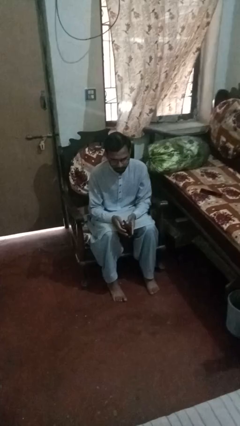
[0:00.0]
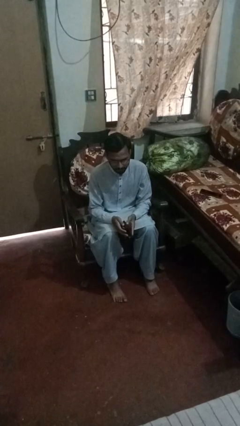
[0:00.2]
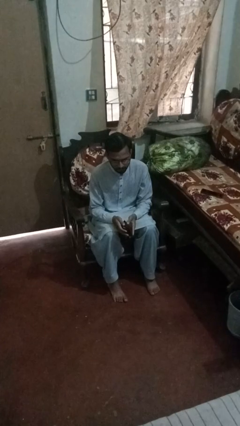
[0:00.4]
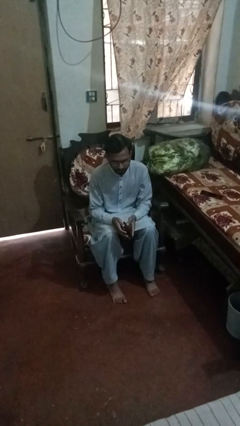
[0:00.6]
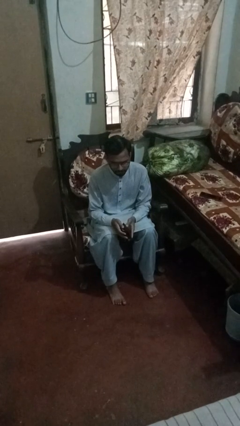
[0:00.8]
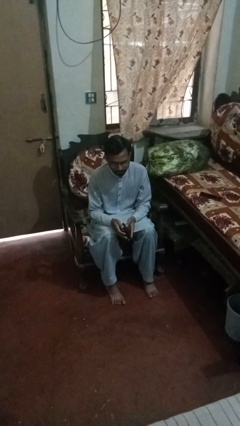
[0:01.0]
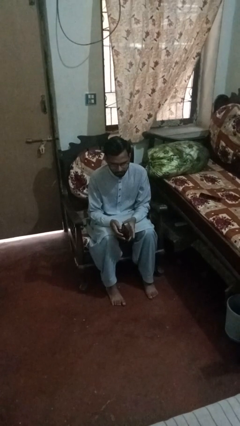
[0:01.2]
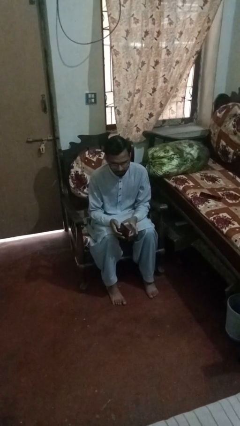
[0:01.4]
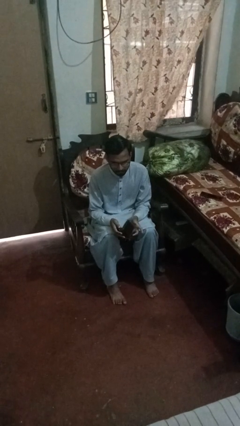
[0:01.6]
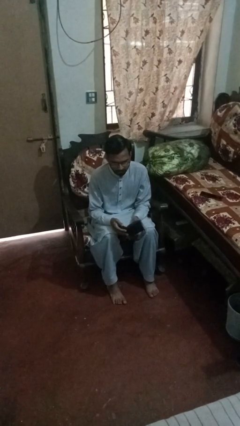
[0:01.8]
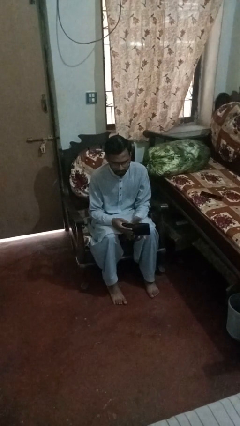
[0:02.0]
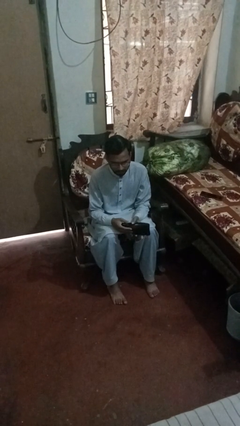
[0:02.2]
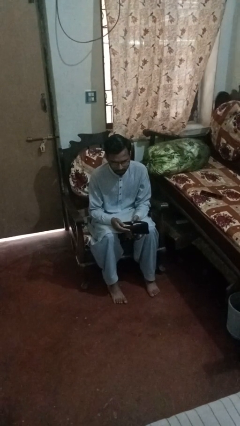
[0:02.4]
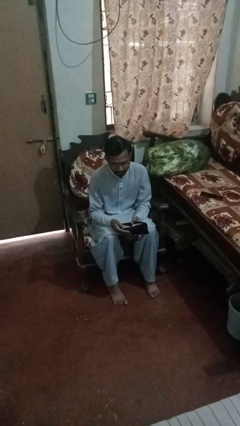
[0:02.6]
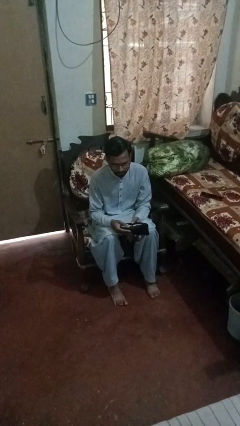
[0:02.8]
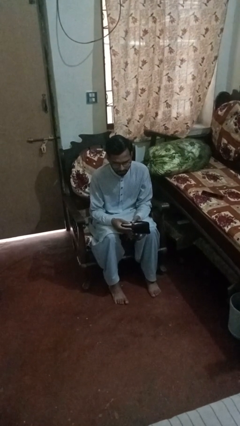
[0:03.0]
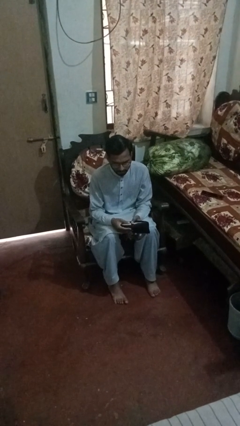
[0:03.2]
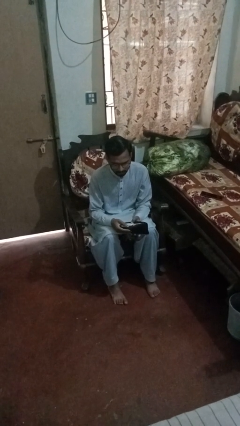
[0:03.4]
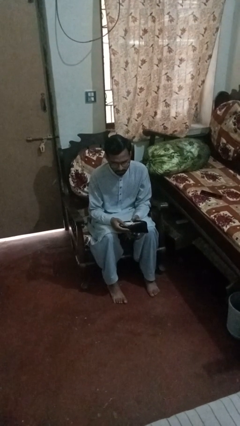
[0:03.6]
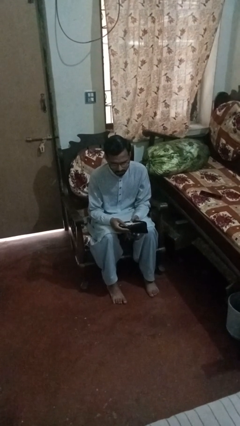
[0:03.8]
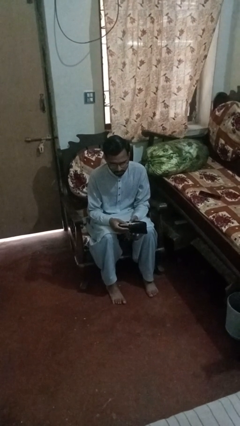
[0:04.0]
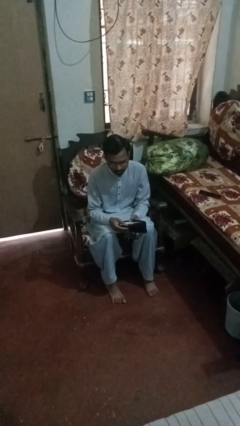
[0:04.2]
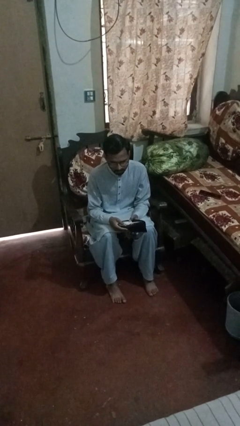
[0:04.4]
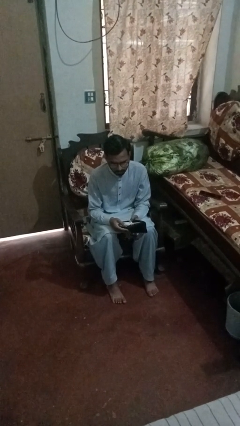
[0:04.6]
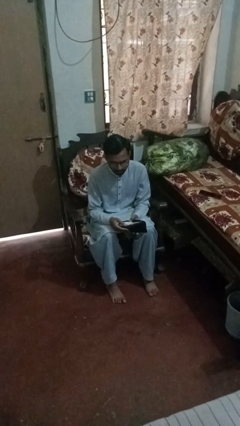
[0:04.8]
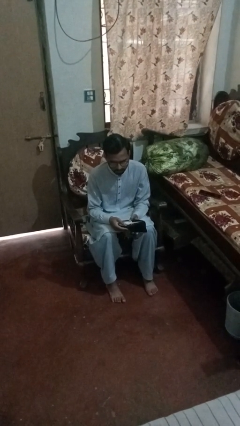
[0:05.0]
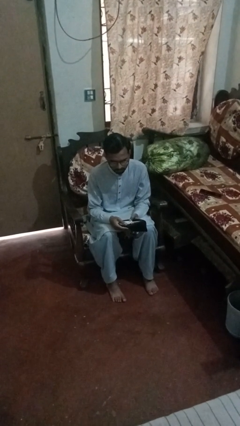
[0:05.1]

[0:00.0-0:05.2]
person searches in purse

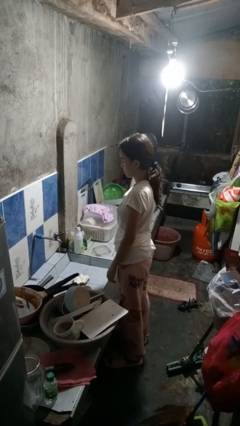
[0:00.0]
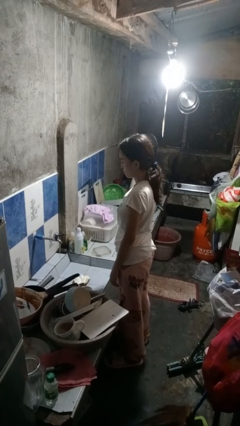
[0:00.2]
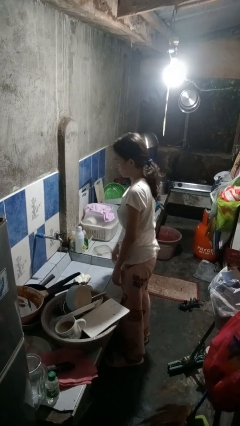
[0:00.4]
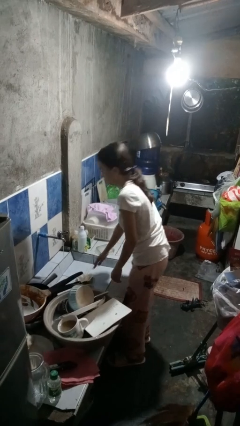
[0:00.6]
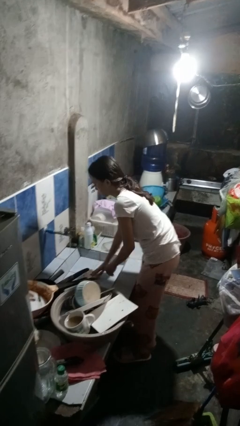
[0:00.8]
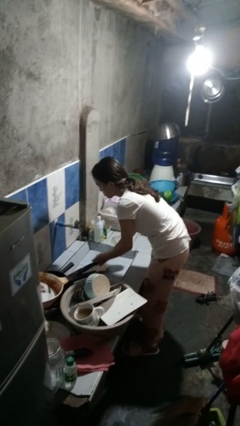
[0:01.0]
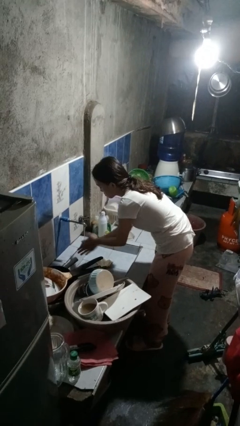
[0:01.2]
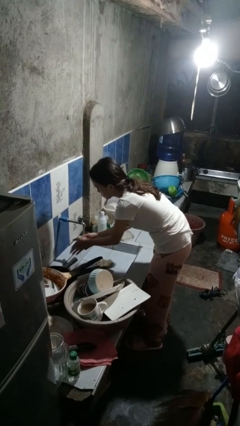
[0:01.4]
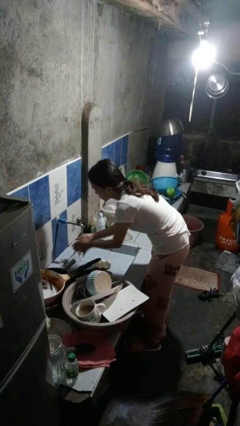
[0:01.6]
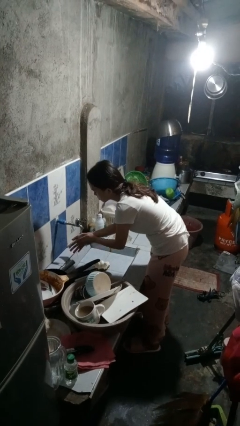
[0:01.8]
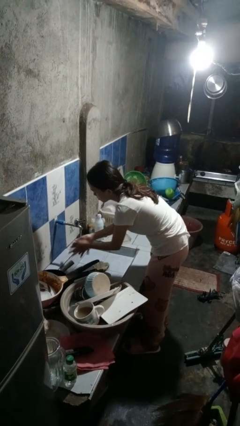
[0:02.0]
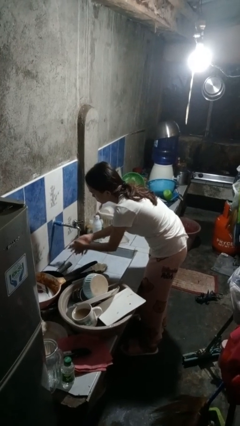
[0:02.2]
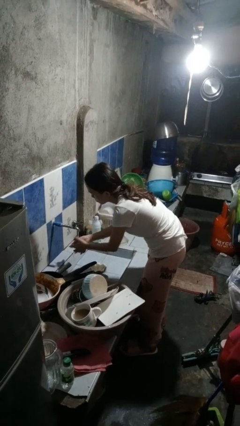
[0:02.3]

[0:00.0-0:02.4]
person washes hands

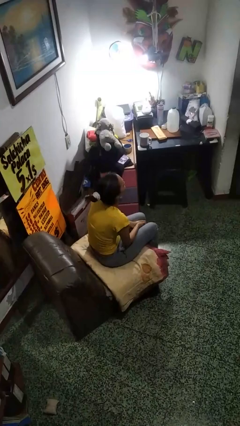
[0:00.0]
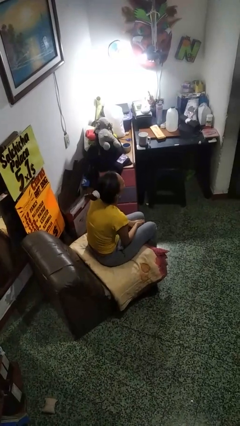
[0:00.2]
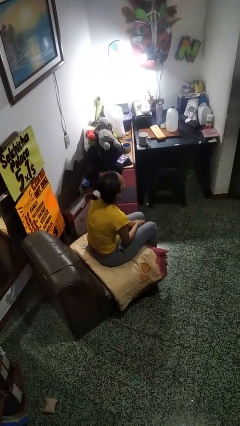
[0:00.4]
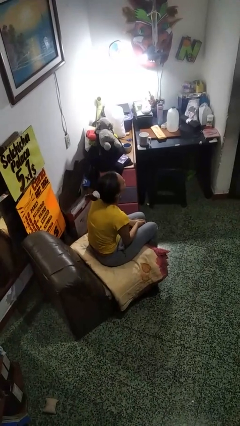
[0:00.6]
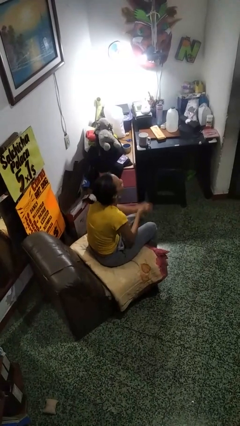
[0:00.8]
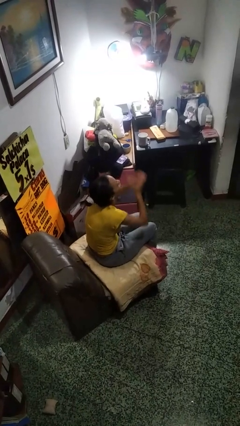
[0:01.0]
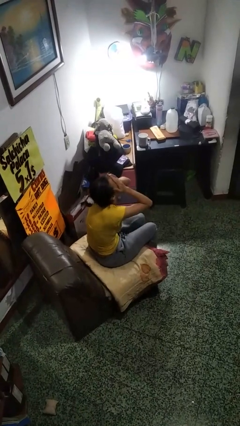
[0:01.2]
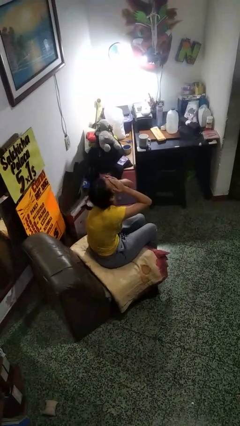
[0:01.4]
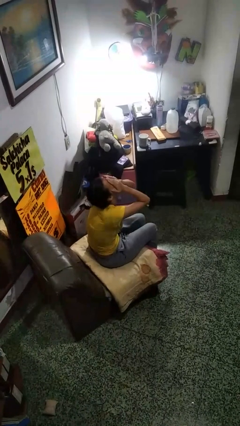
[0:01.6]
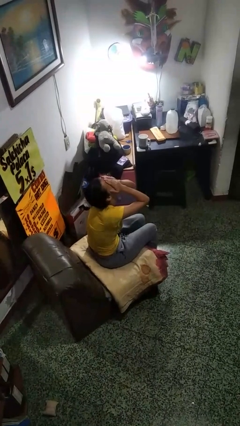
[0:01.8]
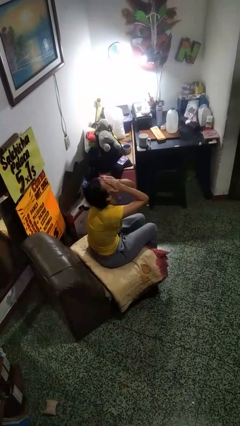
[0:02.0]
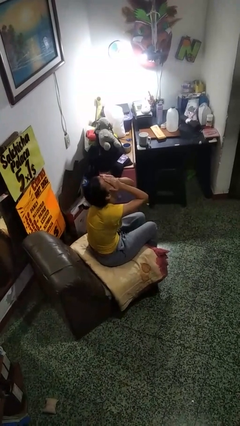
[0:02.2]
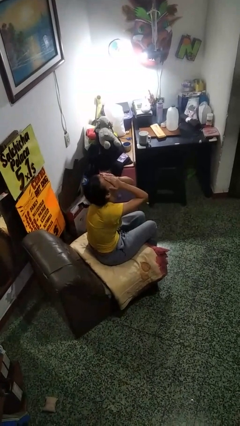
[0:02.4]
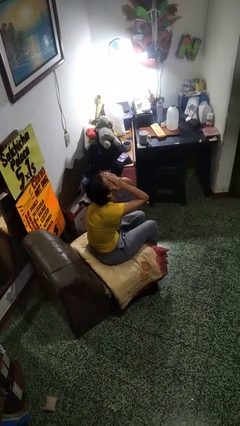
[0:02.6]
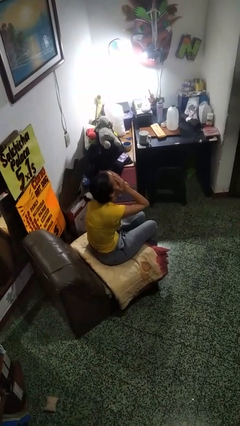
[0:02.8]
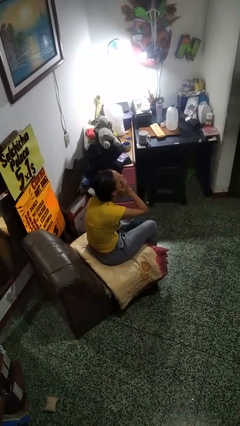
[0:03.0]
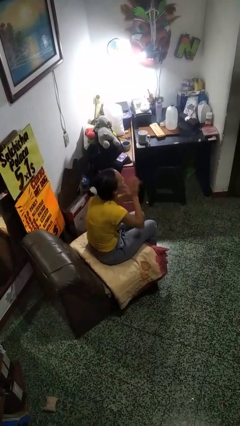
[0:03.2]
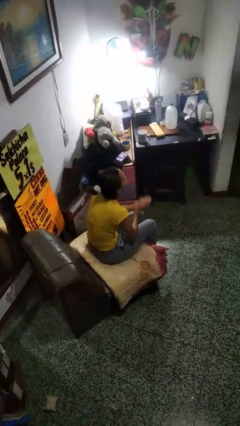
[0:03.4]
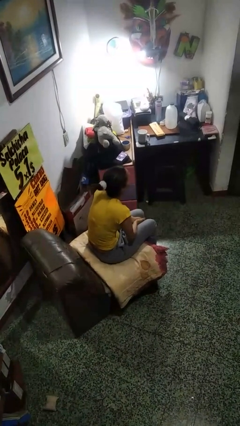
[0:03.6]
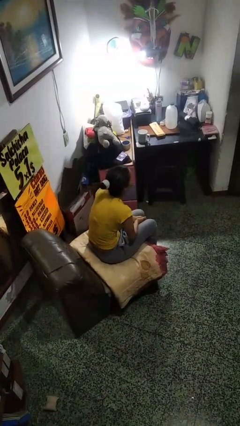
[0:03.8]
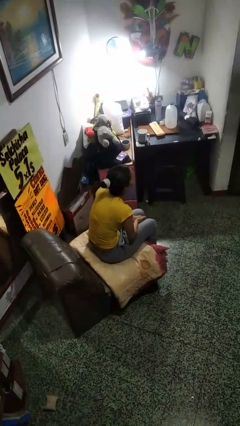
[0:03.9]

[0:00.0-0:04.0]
person covers face with hands

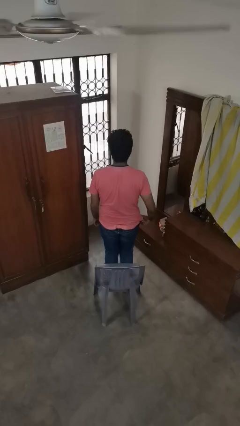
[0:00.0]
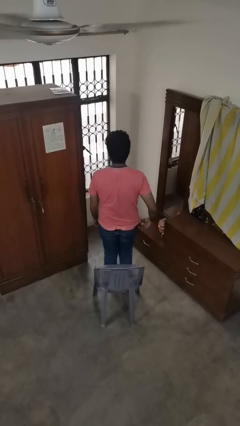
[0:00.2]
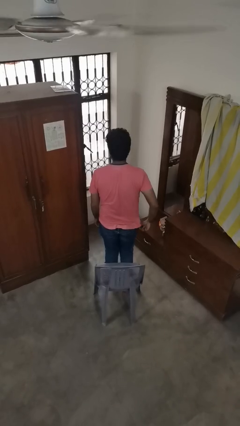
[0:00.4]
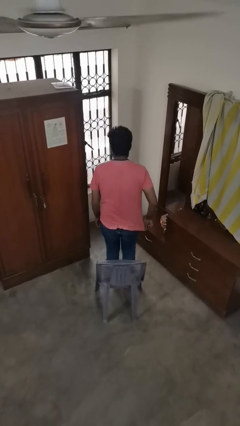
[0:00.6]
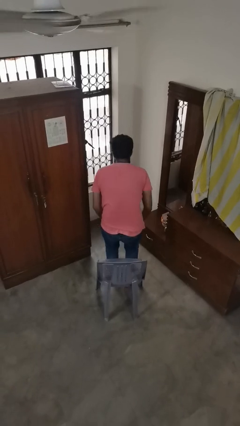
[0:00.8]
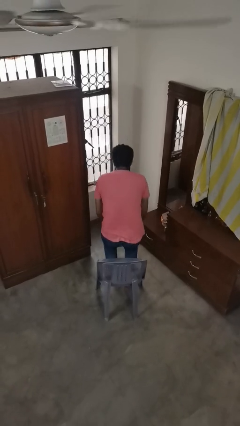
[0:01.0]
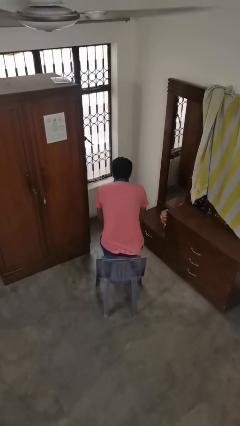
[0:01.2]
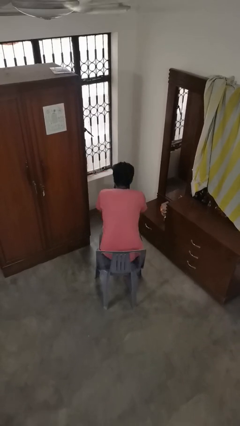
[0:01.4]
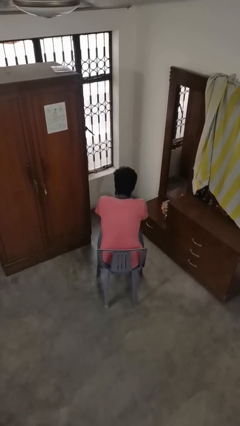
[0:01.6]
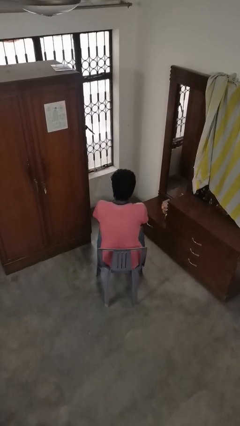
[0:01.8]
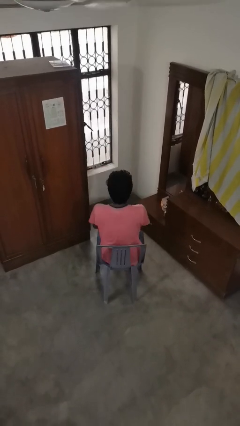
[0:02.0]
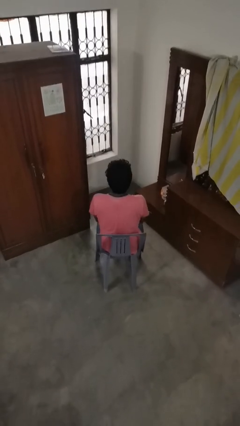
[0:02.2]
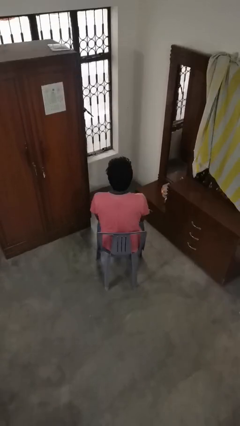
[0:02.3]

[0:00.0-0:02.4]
person sits down

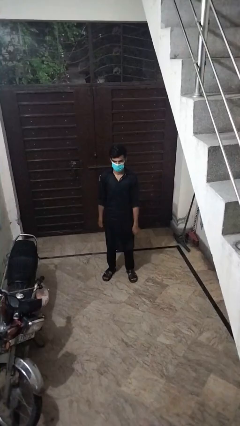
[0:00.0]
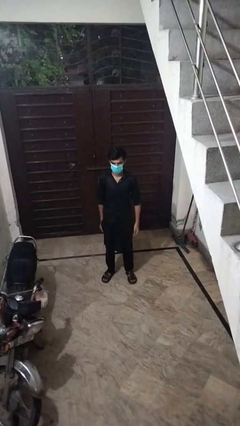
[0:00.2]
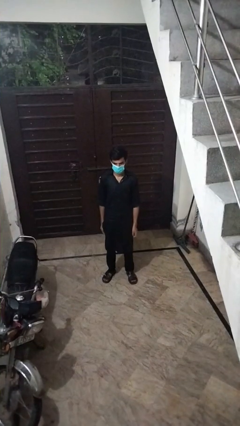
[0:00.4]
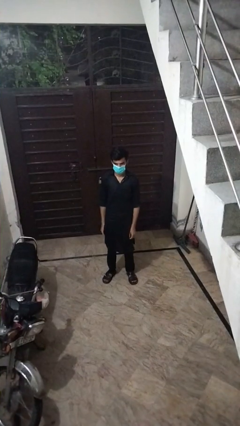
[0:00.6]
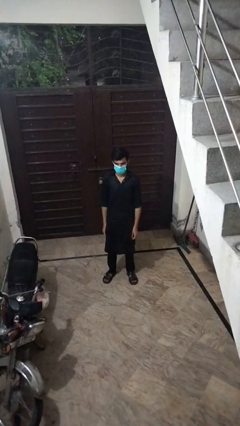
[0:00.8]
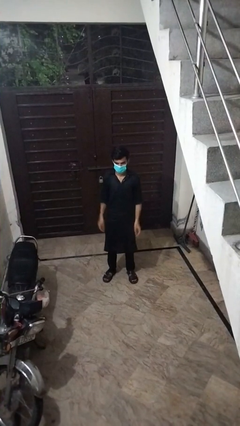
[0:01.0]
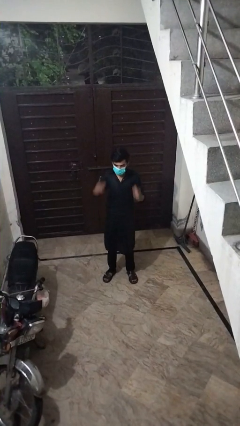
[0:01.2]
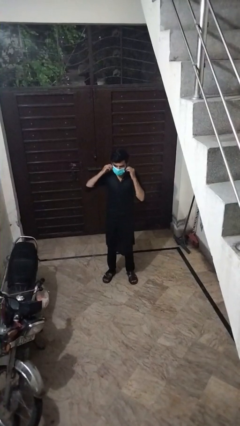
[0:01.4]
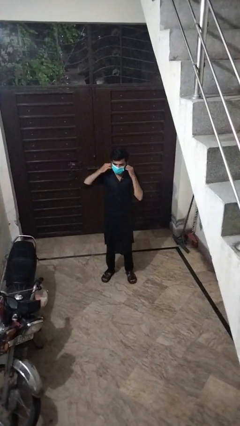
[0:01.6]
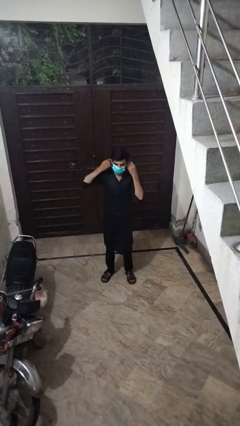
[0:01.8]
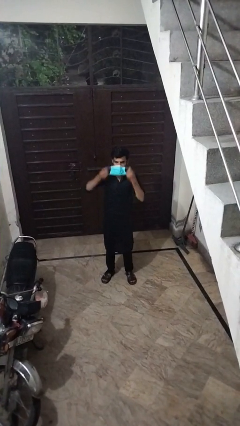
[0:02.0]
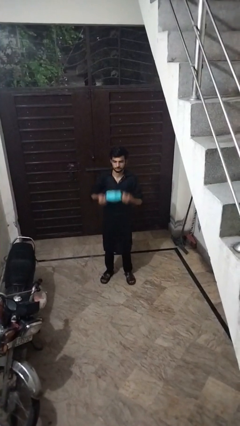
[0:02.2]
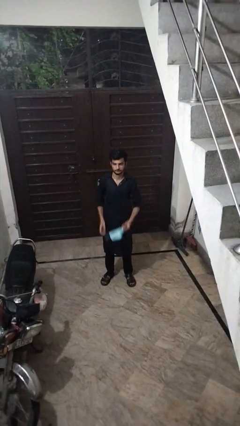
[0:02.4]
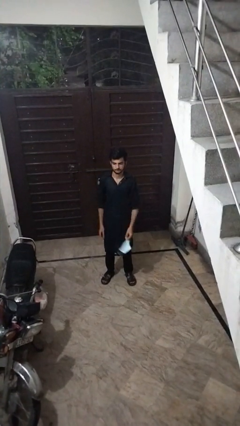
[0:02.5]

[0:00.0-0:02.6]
person takes off facemask

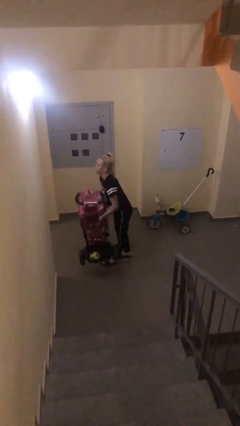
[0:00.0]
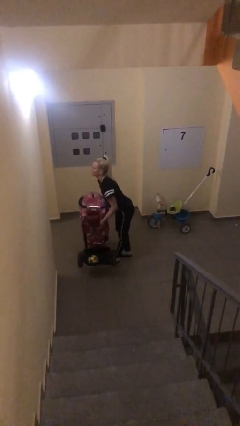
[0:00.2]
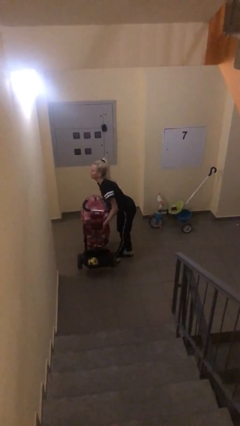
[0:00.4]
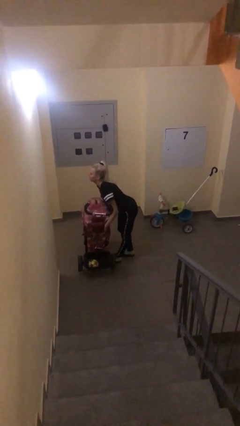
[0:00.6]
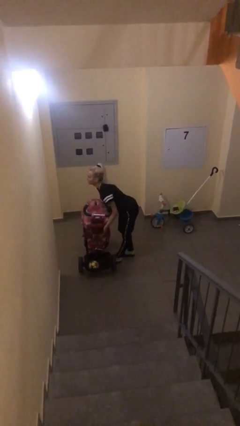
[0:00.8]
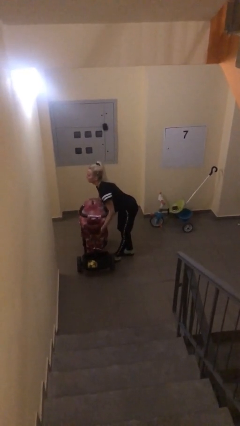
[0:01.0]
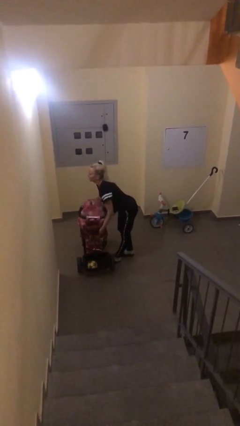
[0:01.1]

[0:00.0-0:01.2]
person puts down object on floor
